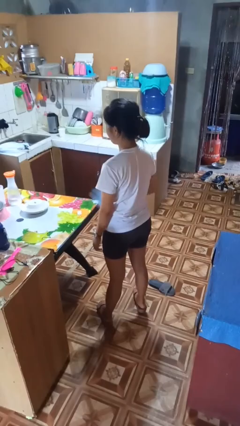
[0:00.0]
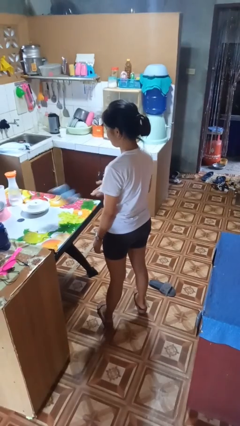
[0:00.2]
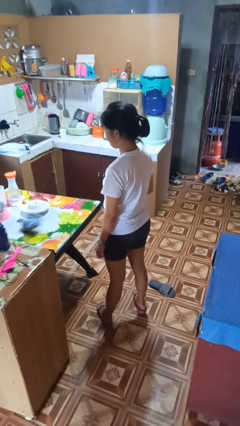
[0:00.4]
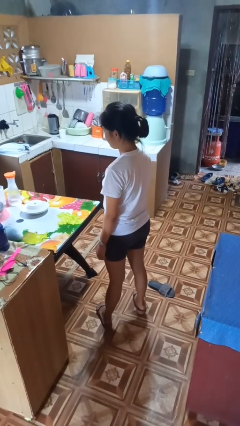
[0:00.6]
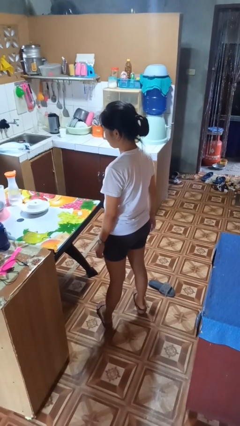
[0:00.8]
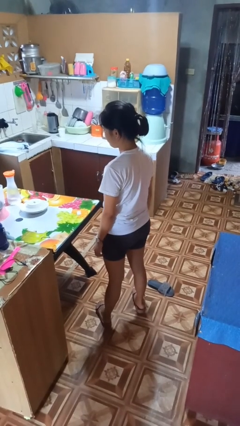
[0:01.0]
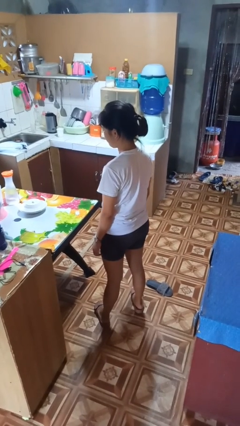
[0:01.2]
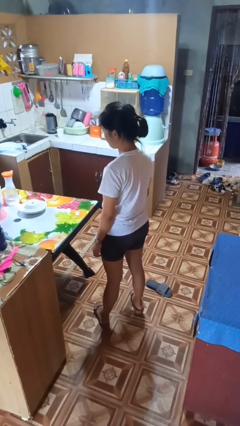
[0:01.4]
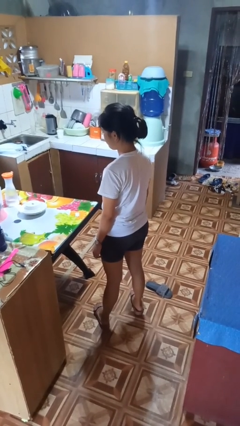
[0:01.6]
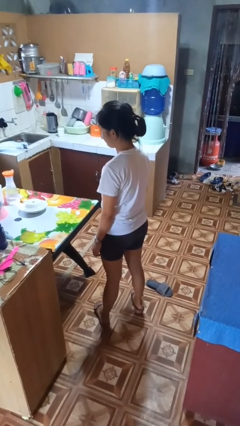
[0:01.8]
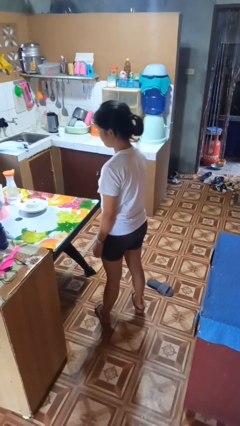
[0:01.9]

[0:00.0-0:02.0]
person throws object on table

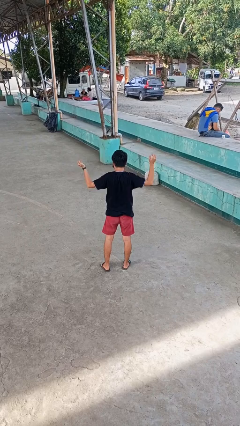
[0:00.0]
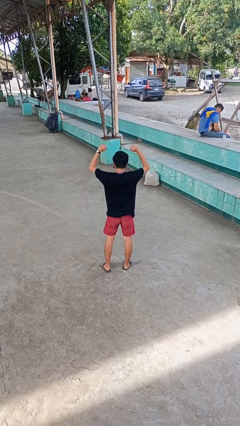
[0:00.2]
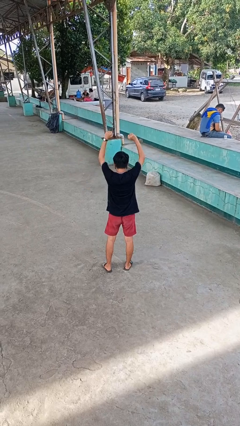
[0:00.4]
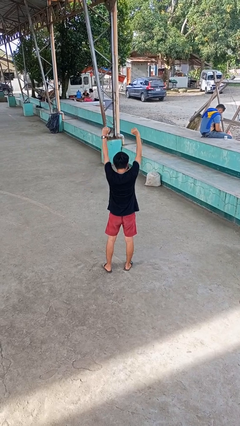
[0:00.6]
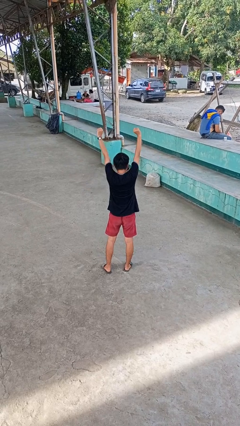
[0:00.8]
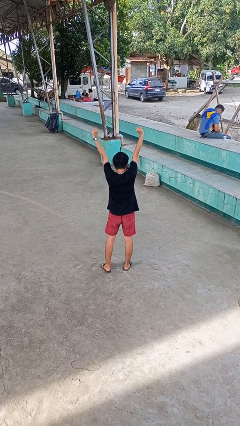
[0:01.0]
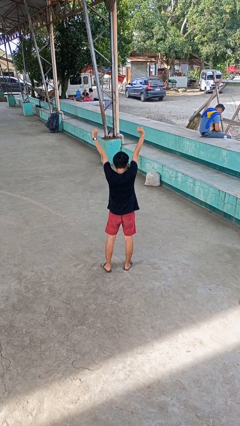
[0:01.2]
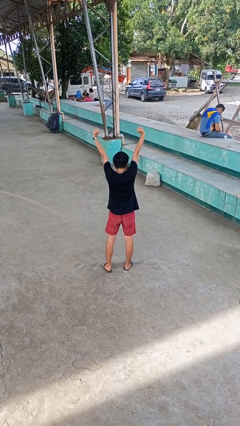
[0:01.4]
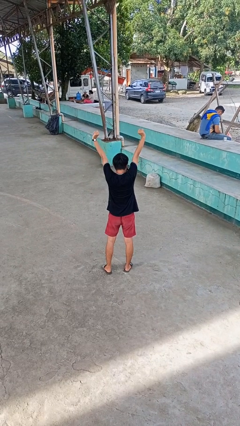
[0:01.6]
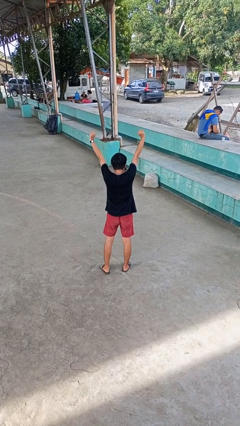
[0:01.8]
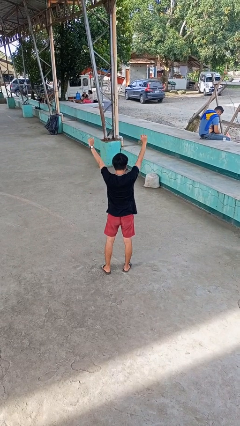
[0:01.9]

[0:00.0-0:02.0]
person stretches arms over head

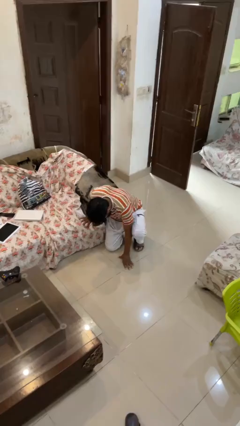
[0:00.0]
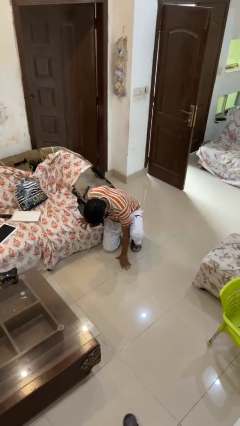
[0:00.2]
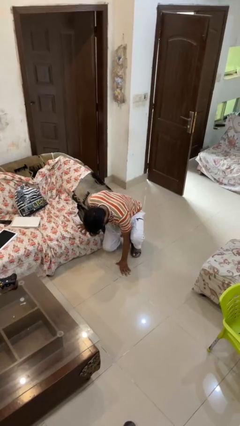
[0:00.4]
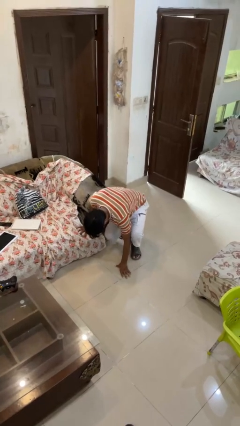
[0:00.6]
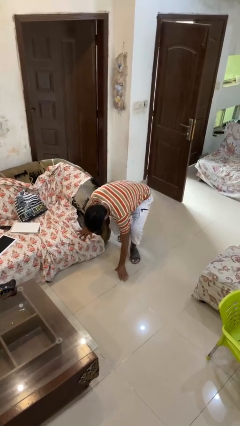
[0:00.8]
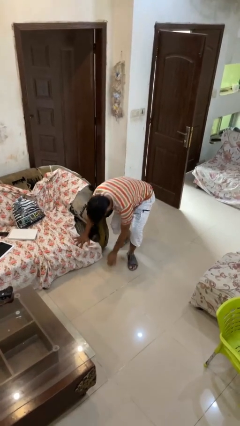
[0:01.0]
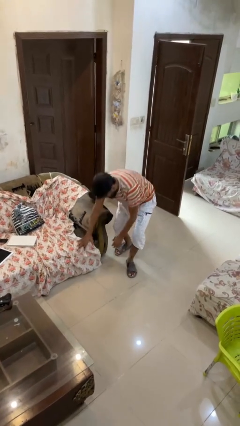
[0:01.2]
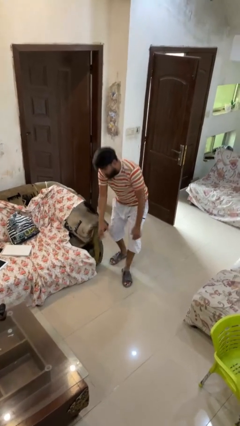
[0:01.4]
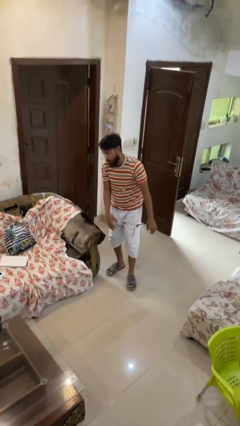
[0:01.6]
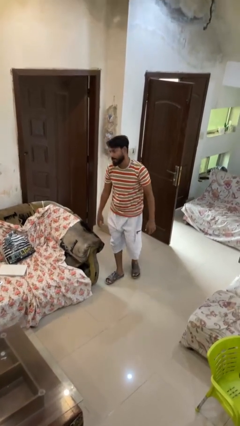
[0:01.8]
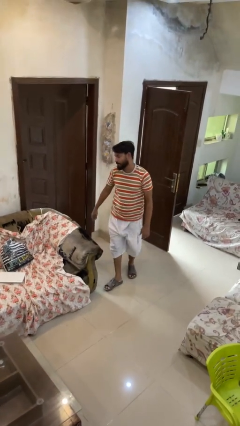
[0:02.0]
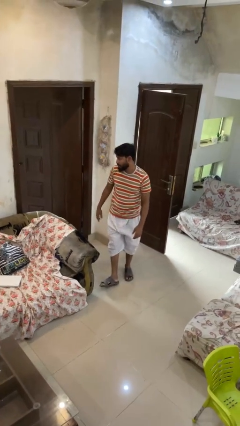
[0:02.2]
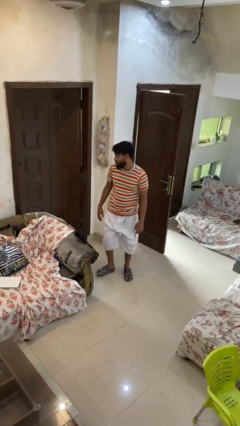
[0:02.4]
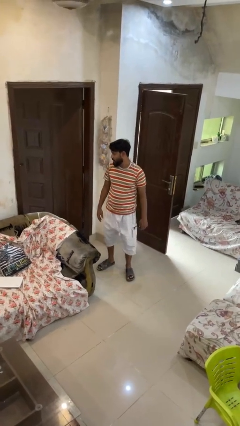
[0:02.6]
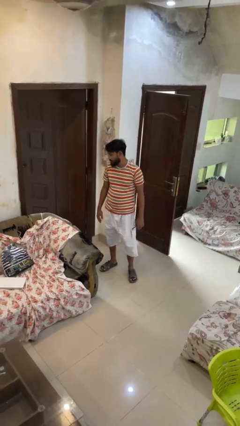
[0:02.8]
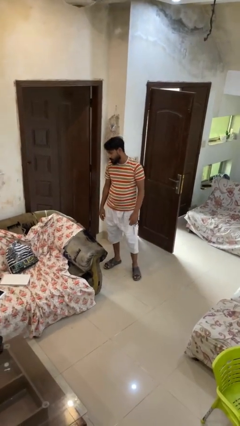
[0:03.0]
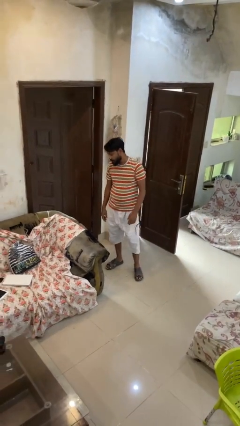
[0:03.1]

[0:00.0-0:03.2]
person stands up from floor

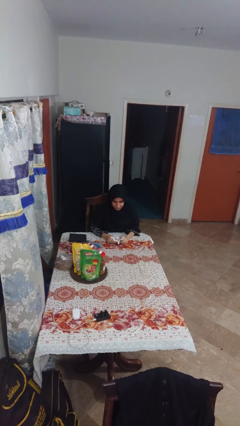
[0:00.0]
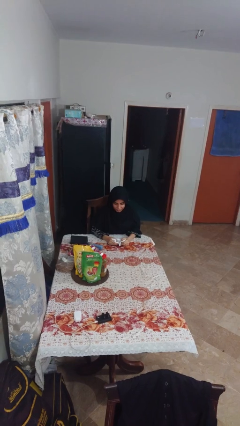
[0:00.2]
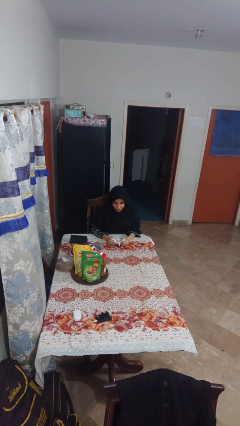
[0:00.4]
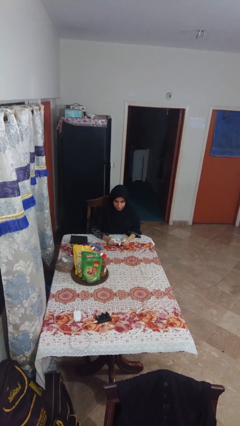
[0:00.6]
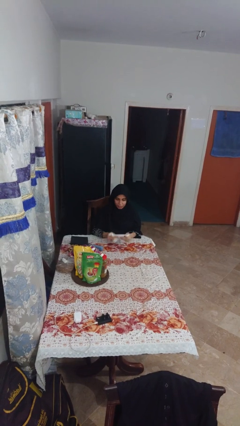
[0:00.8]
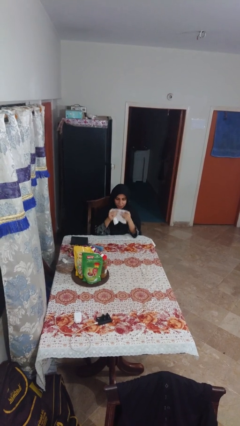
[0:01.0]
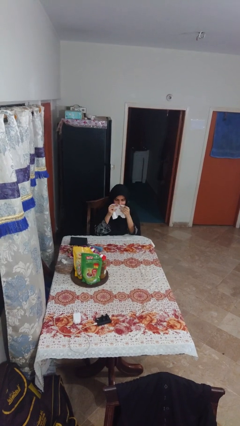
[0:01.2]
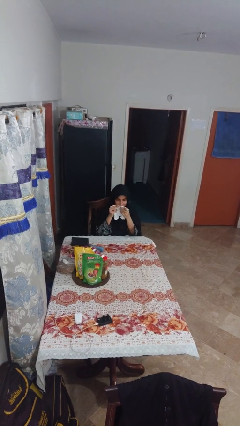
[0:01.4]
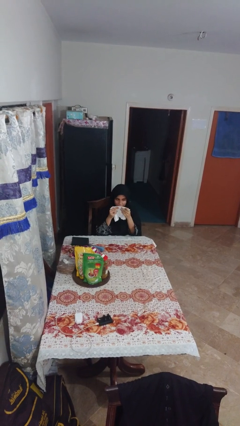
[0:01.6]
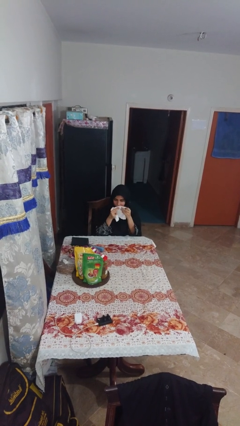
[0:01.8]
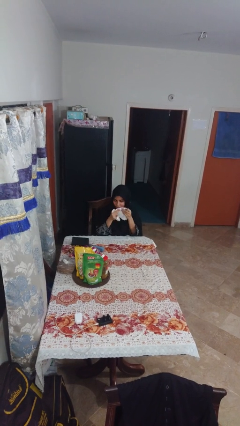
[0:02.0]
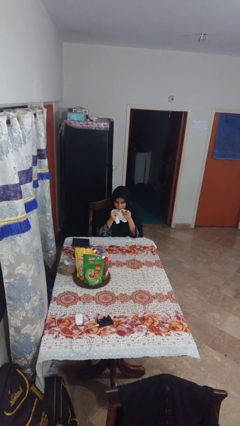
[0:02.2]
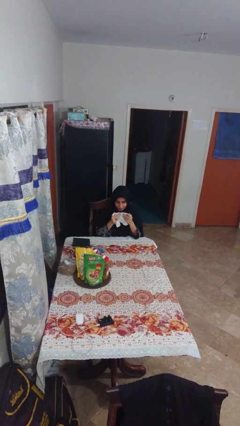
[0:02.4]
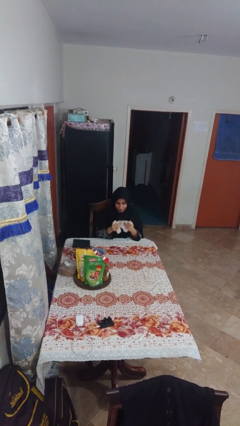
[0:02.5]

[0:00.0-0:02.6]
person wipes mouth with napkin

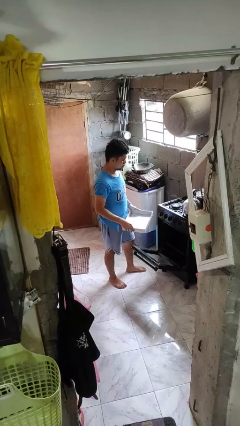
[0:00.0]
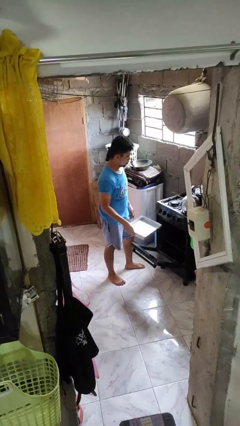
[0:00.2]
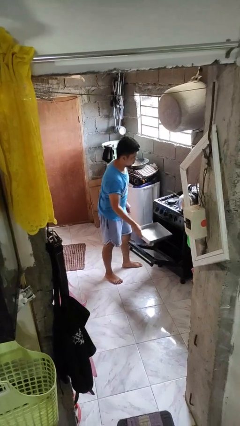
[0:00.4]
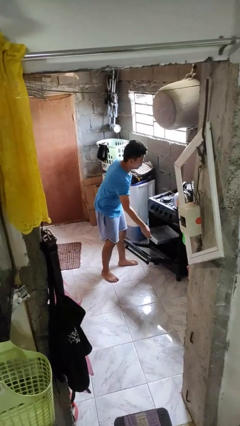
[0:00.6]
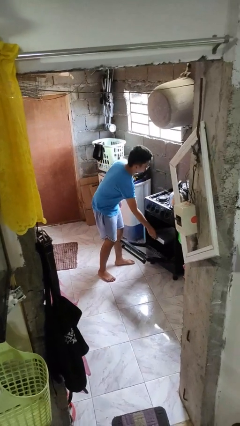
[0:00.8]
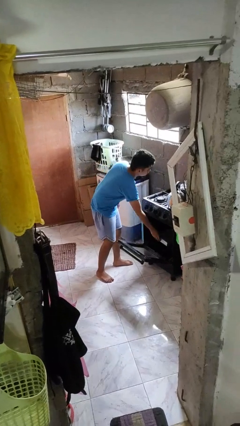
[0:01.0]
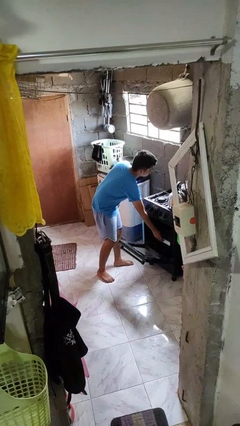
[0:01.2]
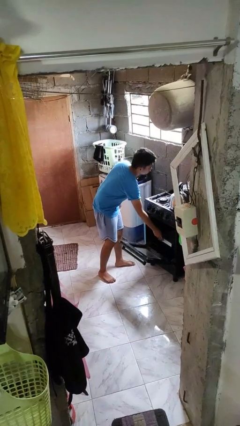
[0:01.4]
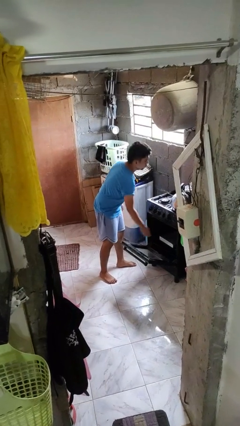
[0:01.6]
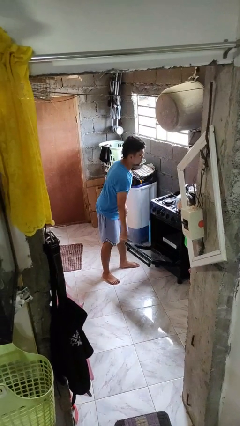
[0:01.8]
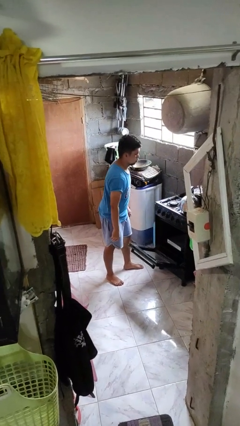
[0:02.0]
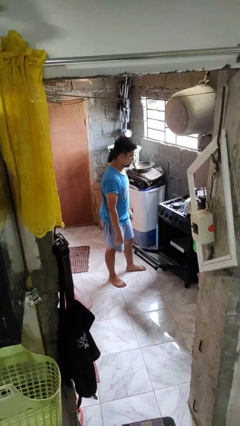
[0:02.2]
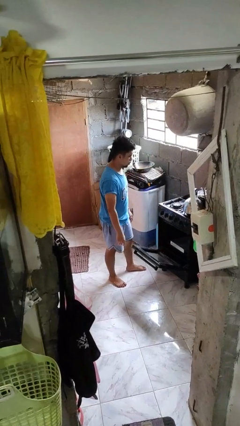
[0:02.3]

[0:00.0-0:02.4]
person puts object into oven

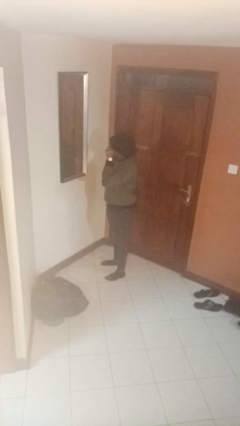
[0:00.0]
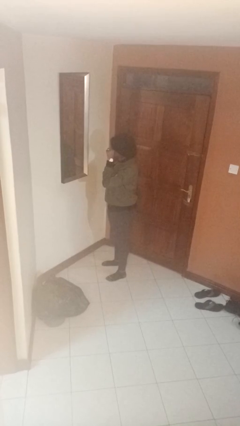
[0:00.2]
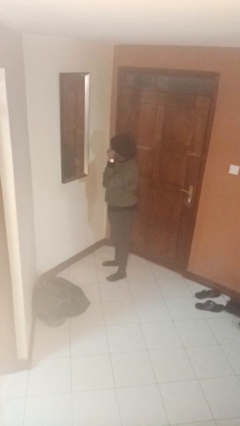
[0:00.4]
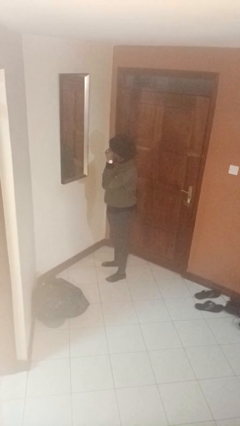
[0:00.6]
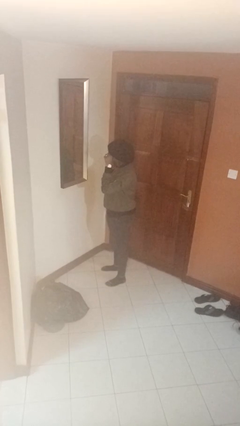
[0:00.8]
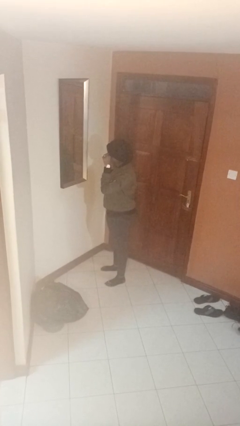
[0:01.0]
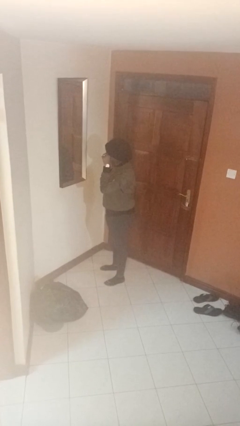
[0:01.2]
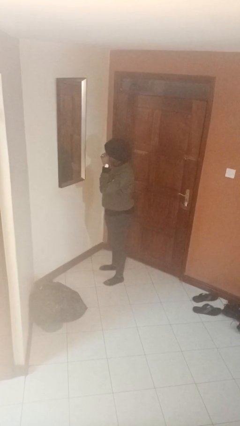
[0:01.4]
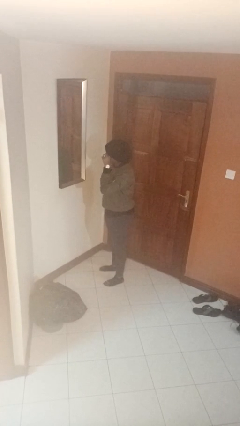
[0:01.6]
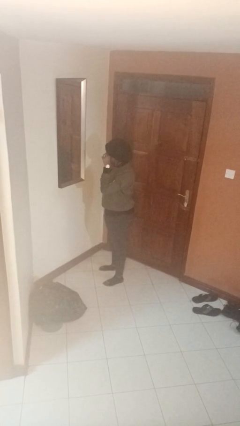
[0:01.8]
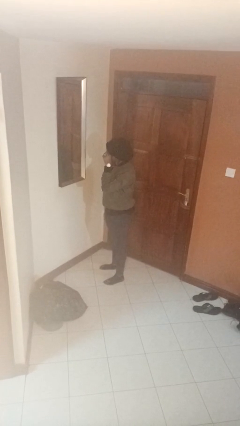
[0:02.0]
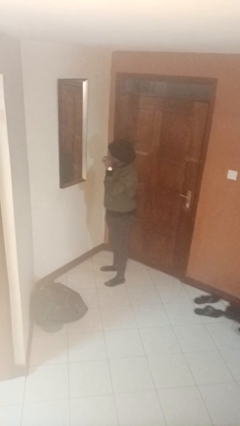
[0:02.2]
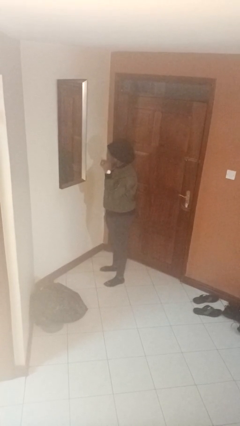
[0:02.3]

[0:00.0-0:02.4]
person applies eye makeup

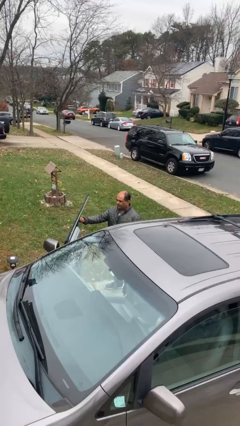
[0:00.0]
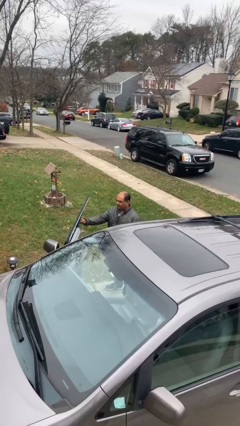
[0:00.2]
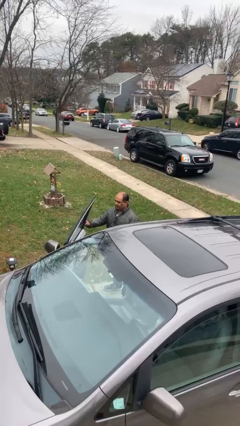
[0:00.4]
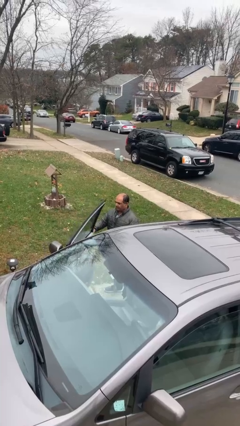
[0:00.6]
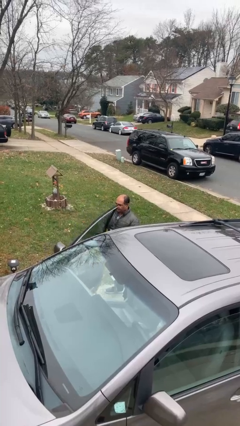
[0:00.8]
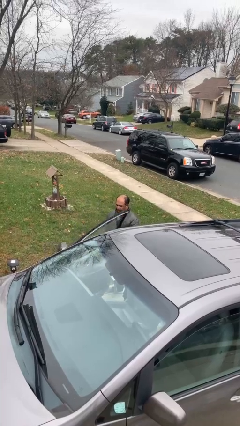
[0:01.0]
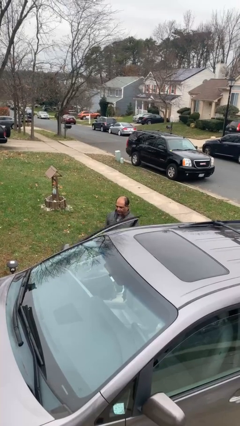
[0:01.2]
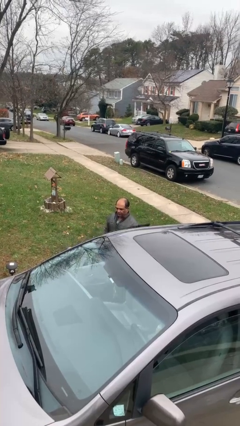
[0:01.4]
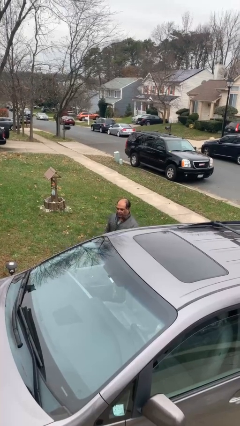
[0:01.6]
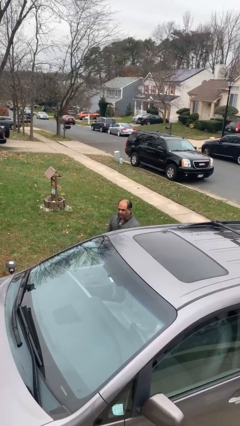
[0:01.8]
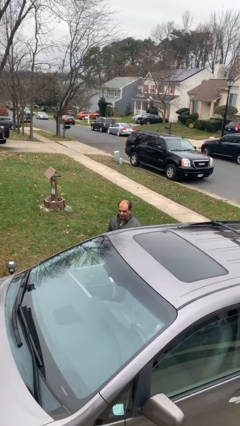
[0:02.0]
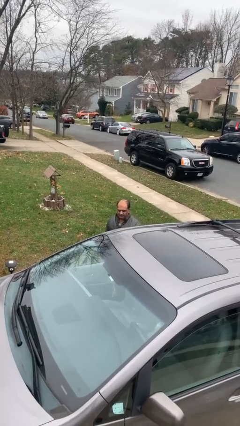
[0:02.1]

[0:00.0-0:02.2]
person closes car door

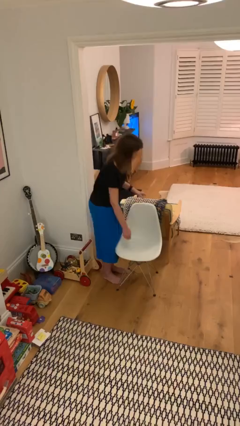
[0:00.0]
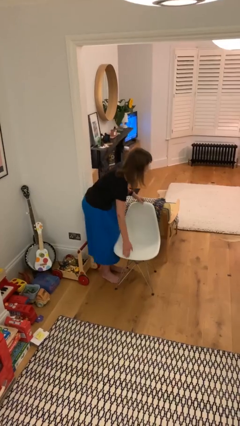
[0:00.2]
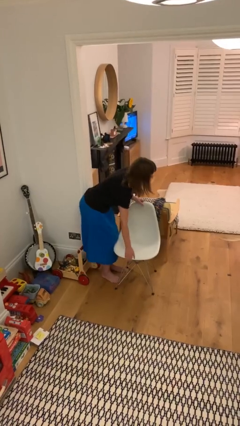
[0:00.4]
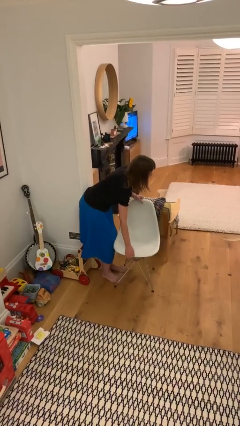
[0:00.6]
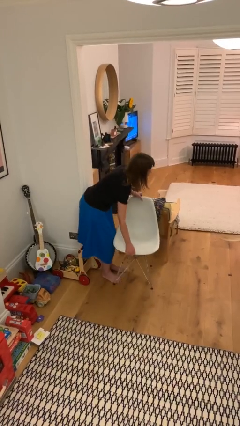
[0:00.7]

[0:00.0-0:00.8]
person picks up object from floor
